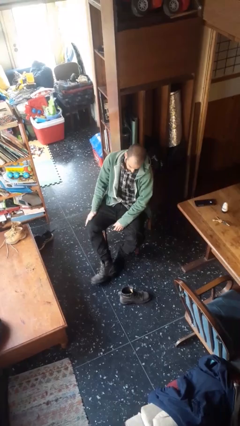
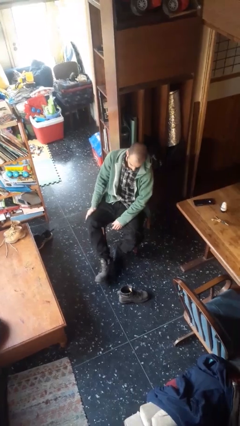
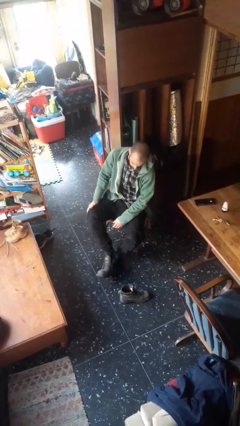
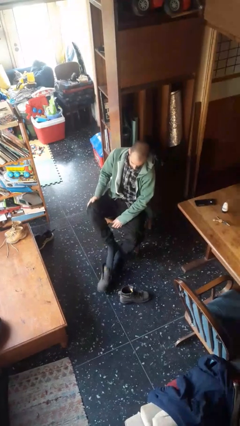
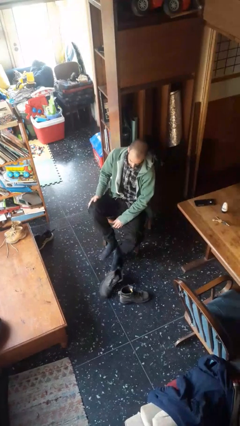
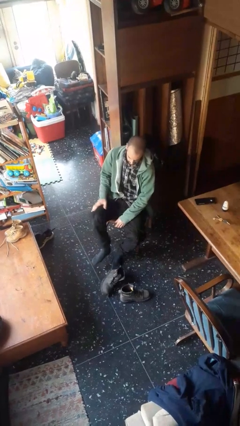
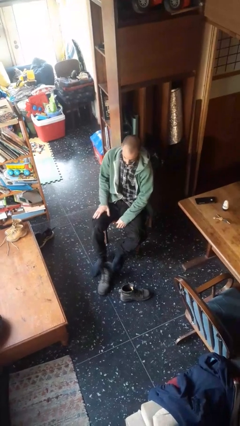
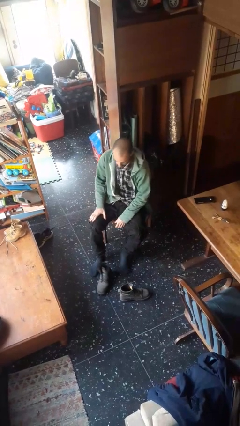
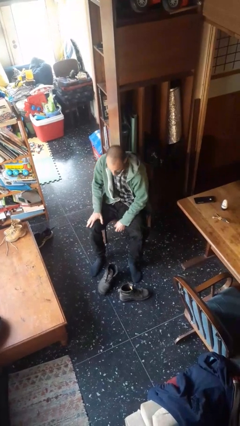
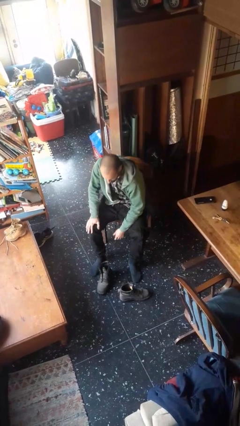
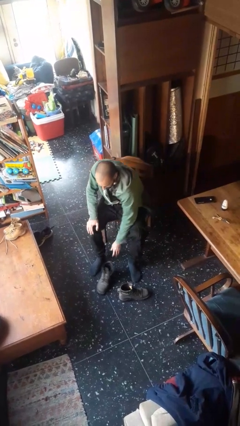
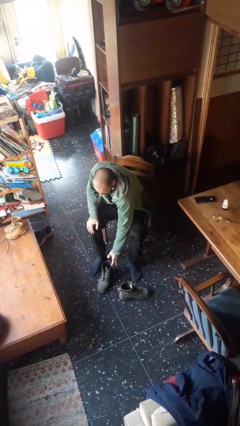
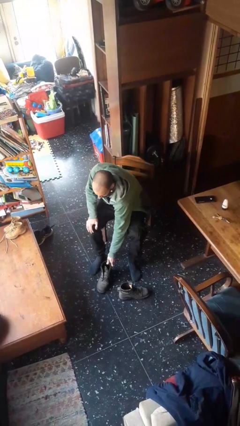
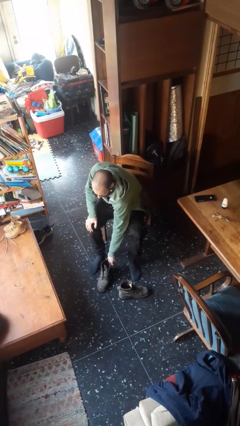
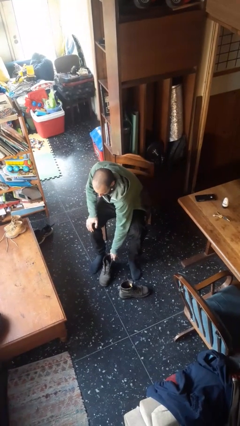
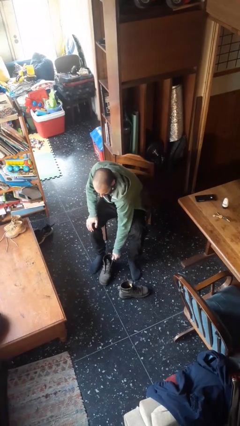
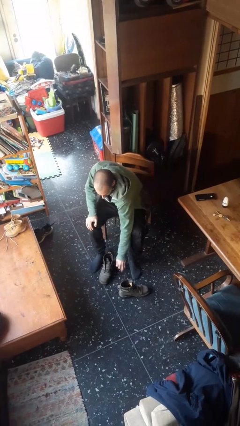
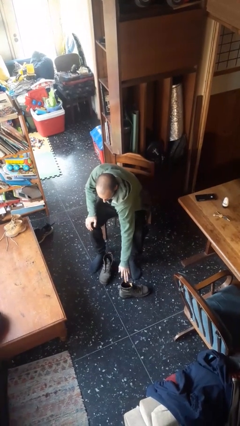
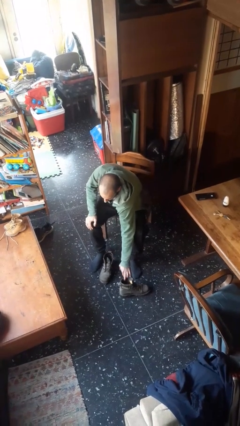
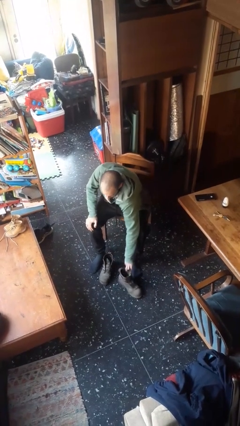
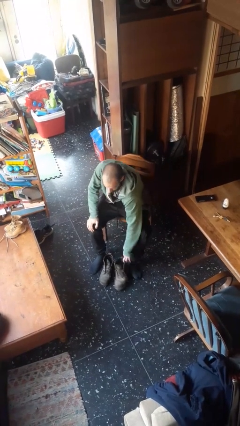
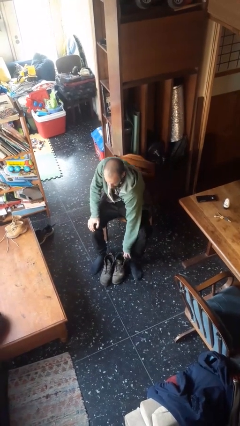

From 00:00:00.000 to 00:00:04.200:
person takes off boots

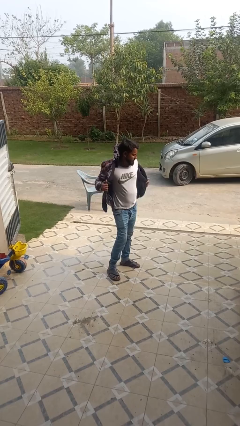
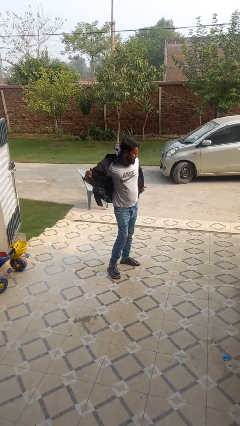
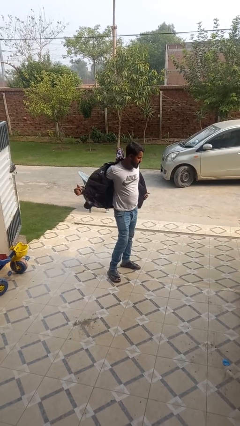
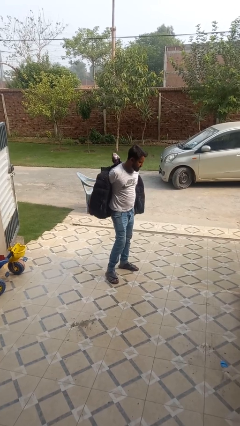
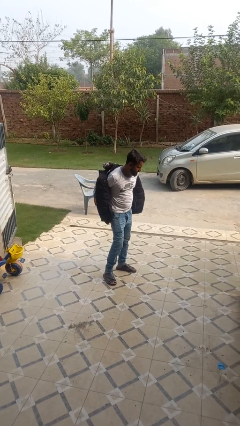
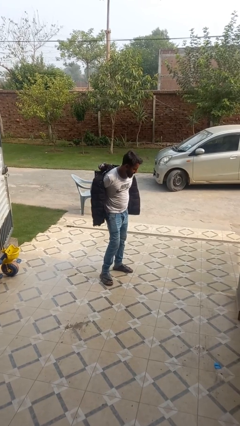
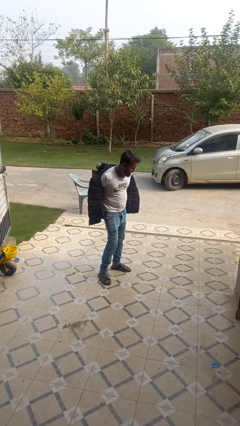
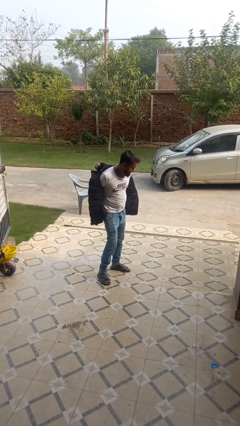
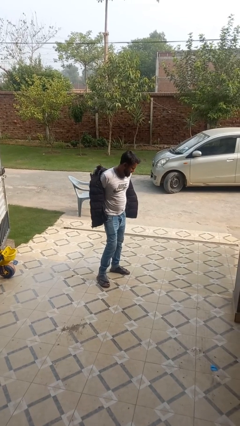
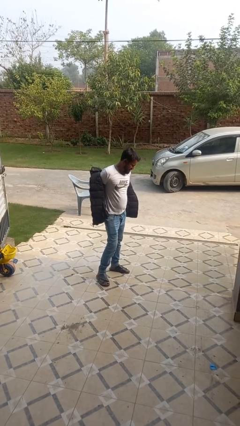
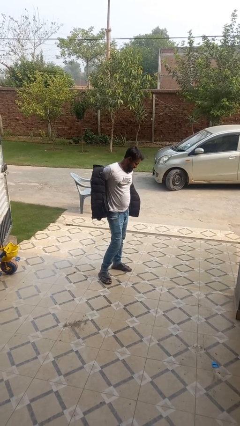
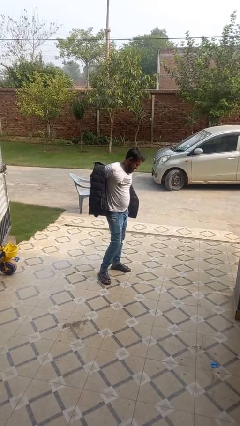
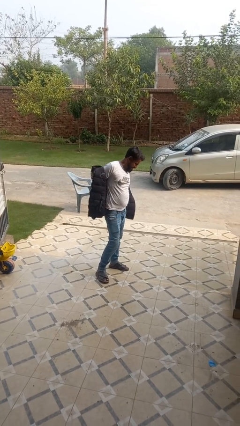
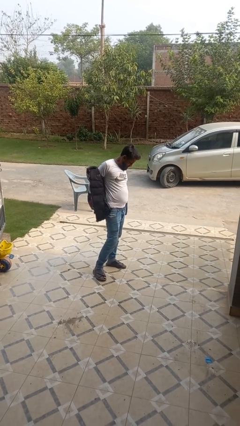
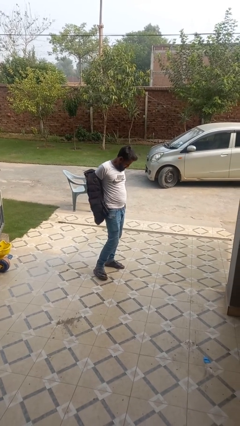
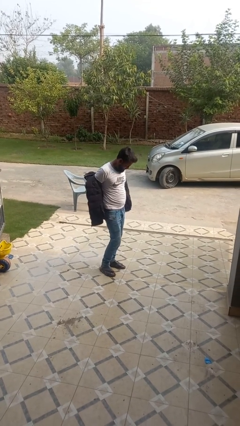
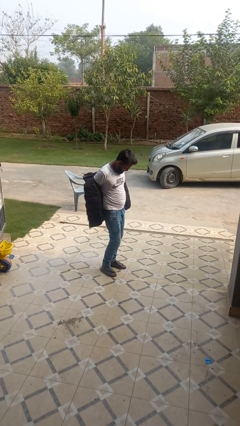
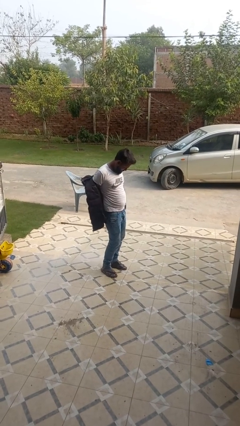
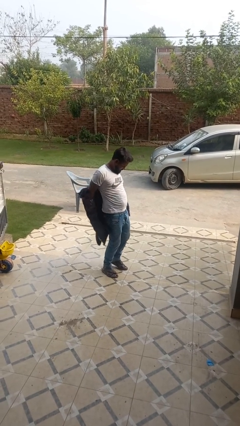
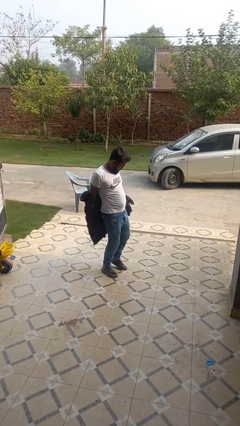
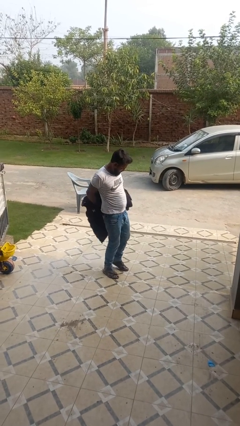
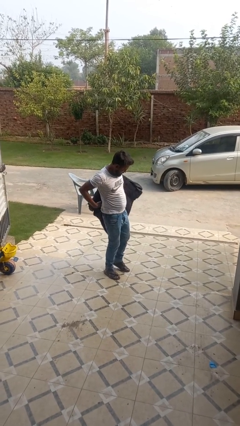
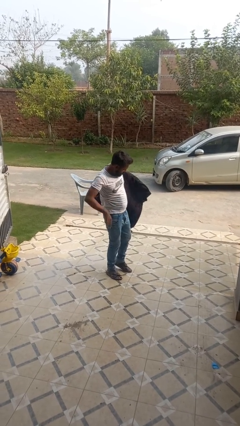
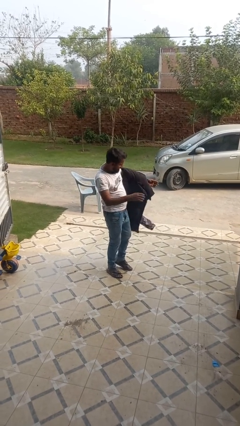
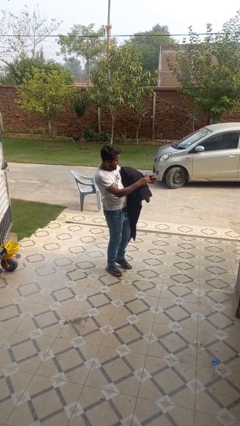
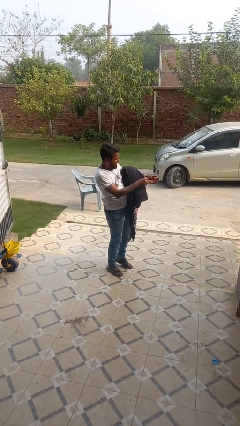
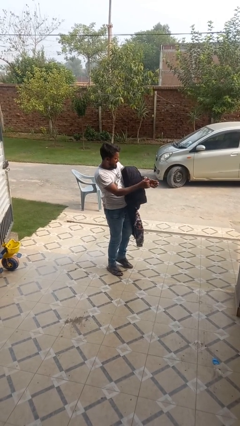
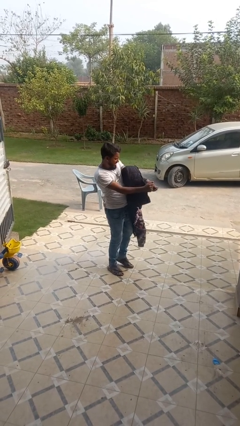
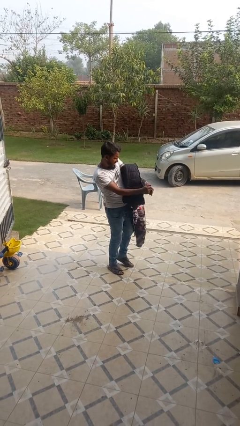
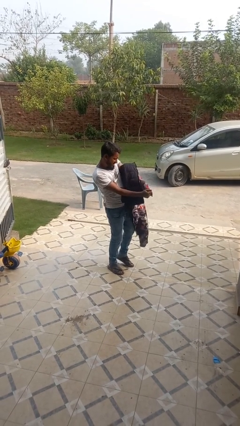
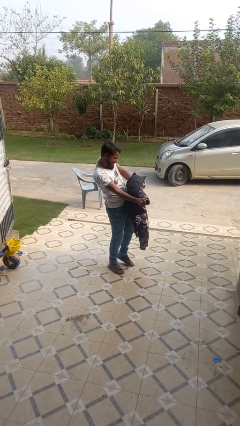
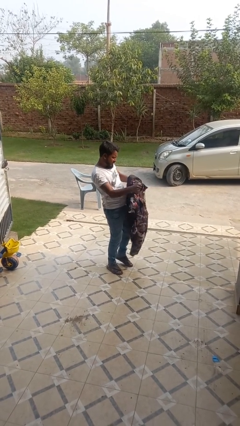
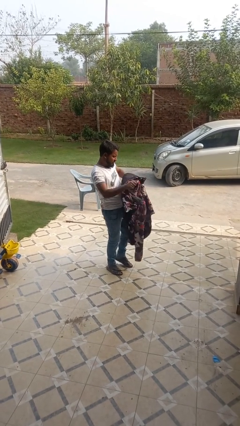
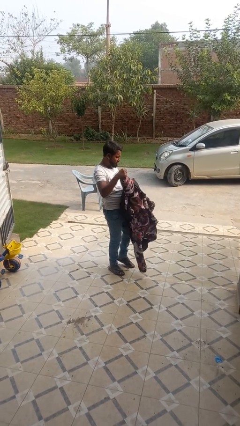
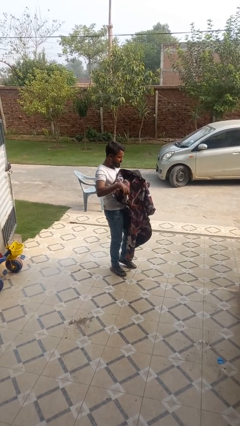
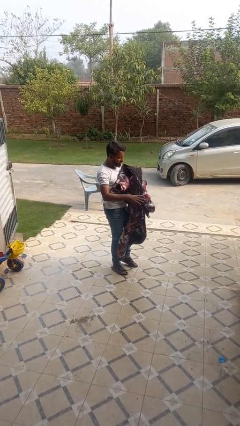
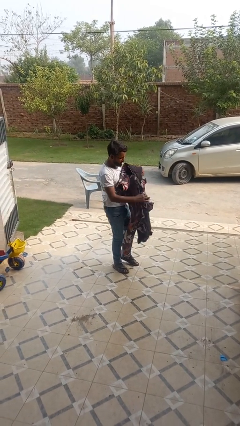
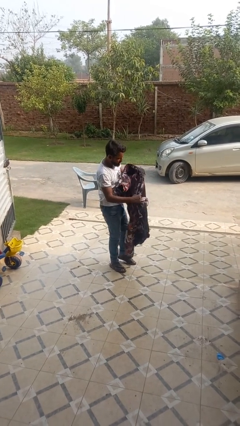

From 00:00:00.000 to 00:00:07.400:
person takes off jacket

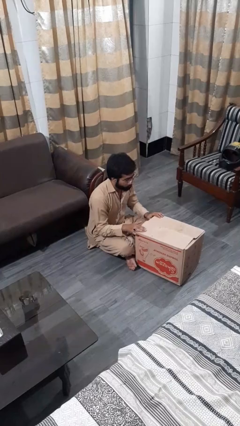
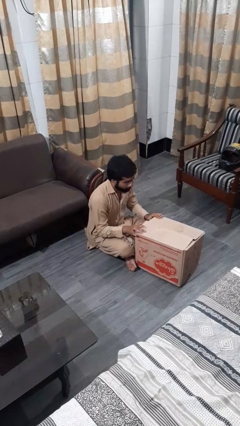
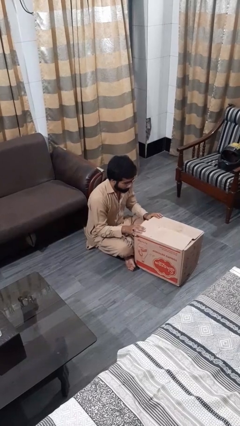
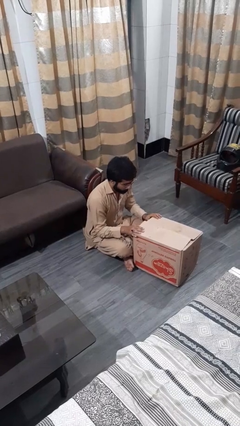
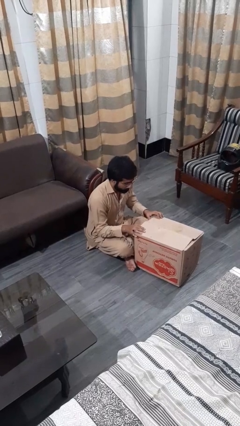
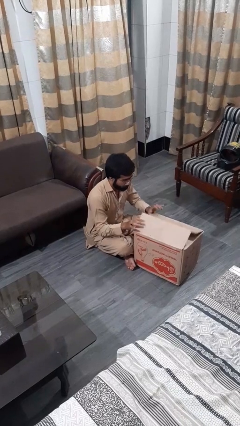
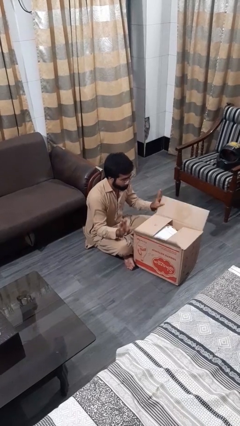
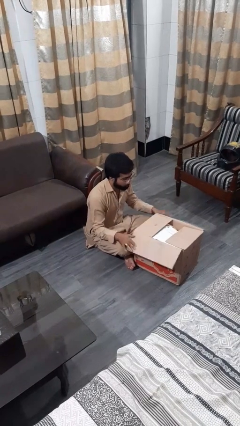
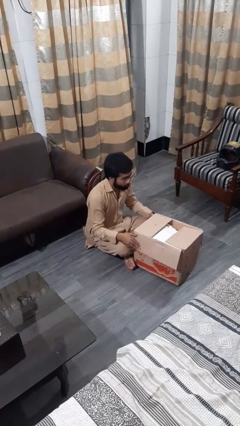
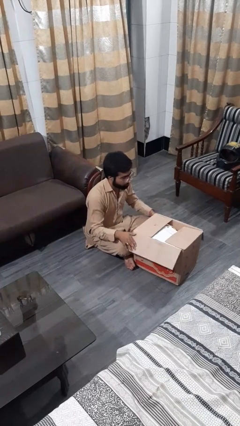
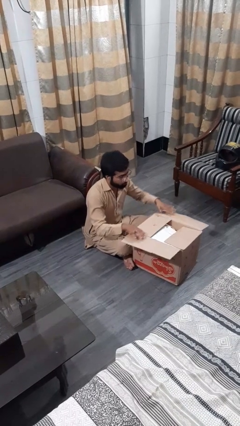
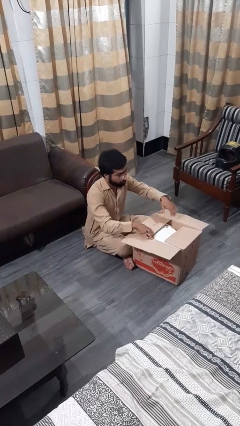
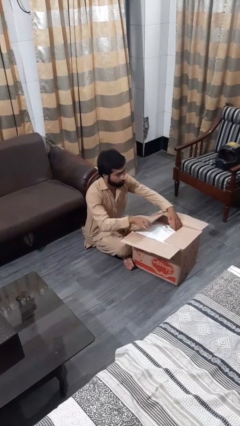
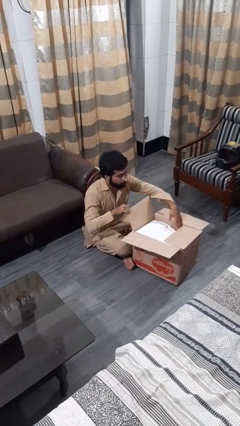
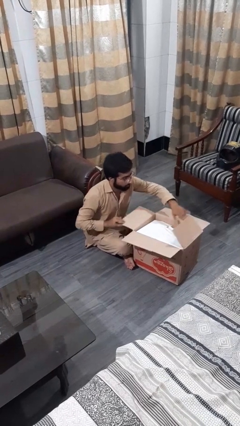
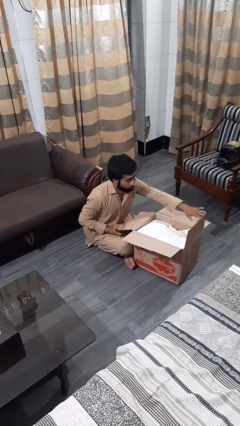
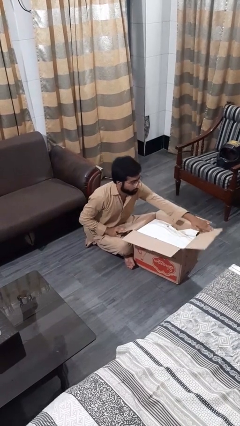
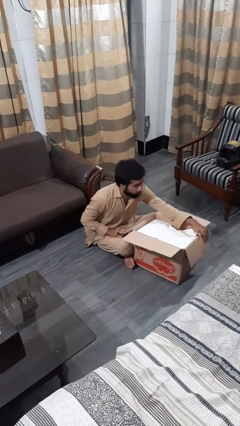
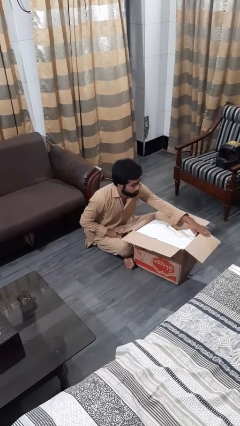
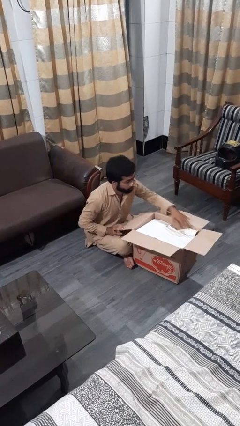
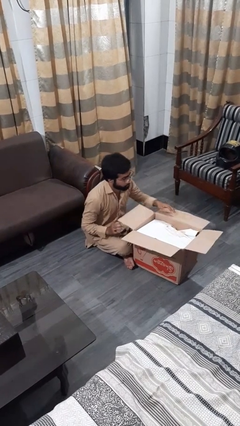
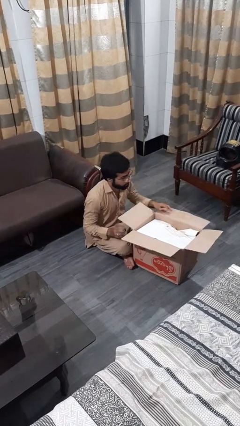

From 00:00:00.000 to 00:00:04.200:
person opens box

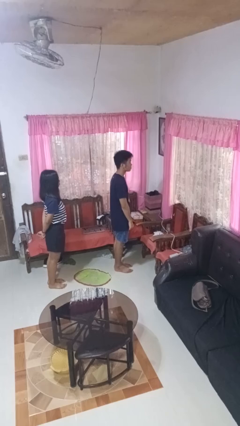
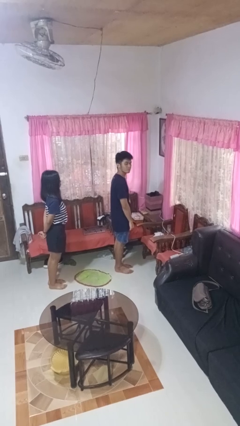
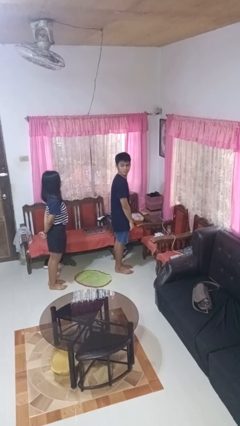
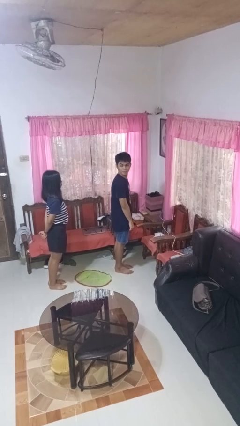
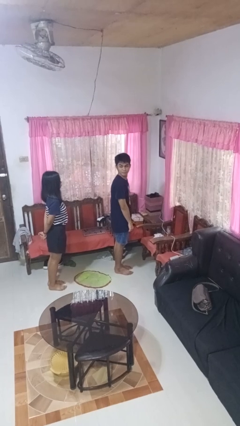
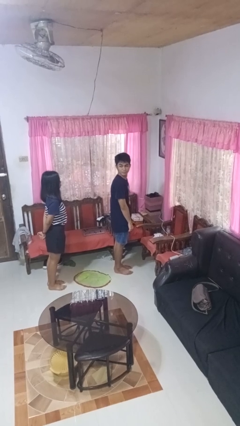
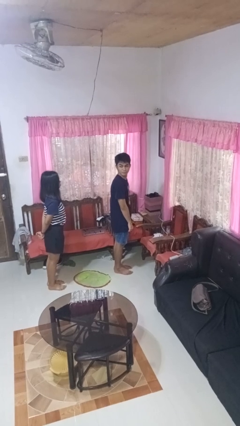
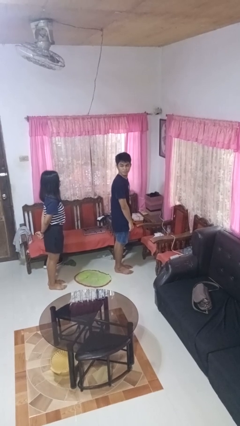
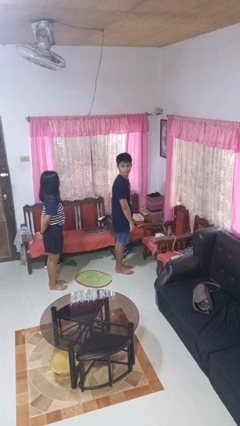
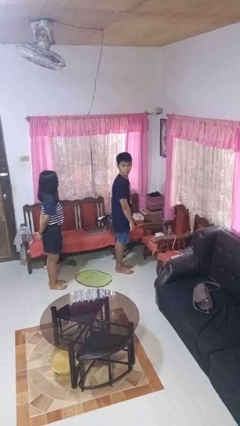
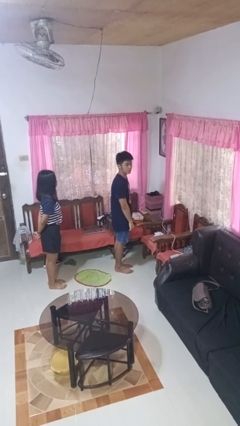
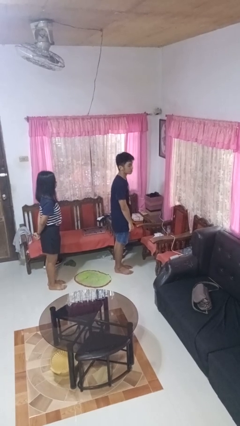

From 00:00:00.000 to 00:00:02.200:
person looks over shoulder
